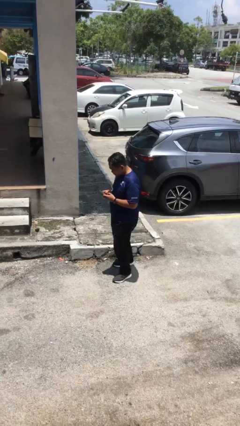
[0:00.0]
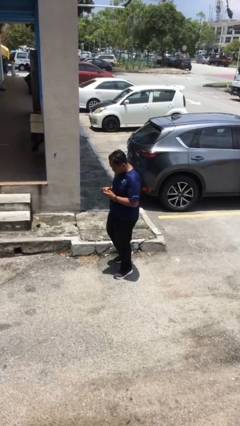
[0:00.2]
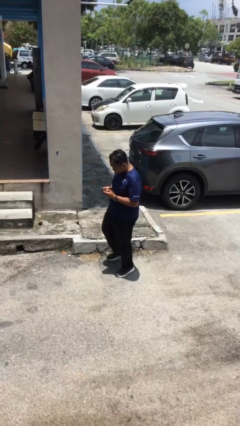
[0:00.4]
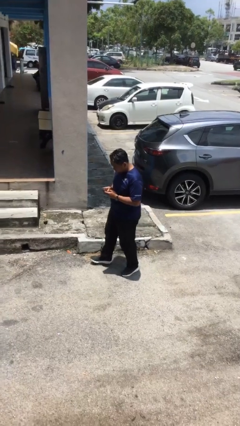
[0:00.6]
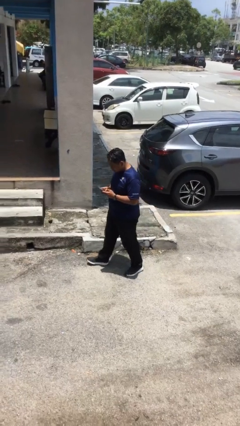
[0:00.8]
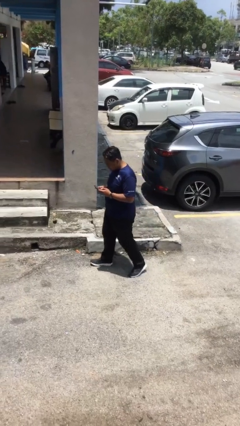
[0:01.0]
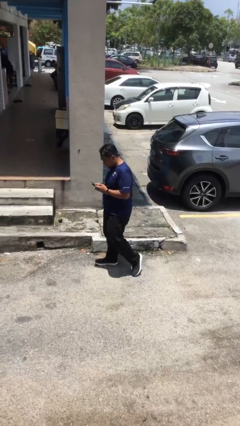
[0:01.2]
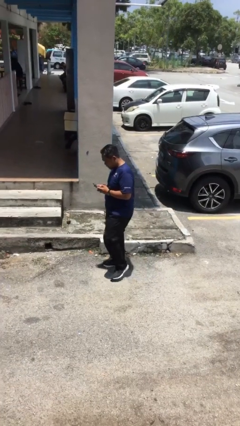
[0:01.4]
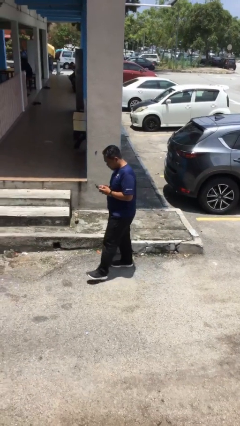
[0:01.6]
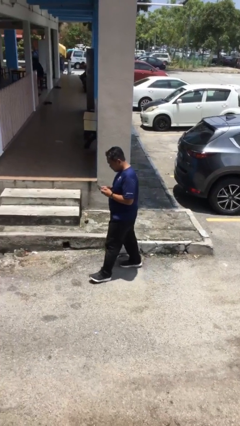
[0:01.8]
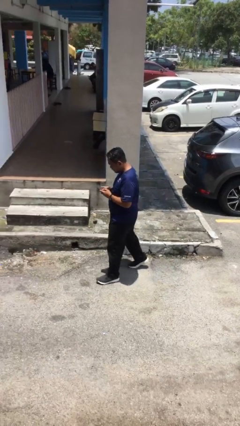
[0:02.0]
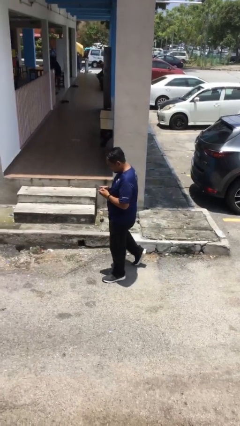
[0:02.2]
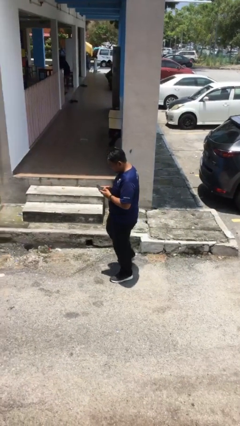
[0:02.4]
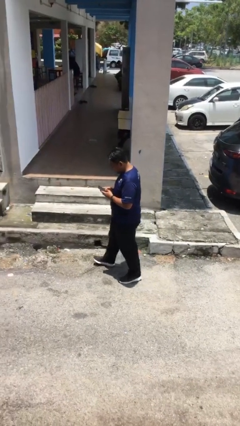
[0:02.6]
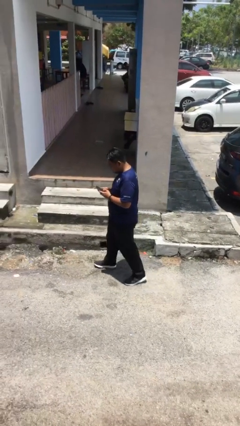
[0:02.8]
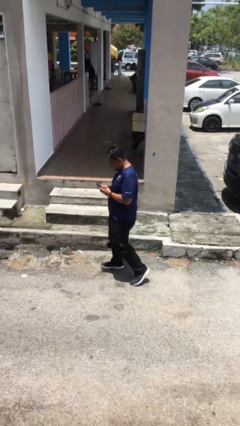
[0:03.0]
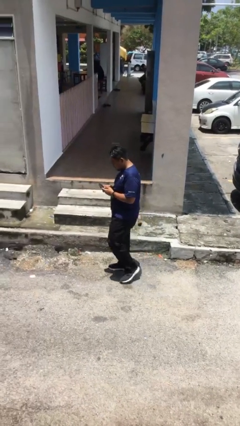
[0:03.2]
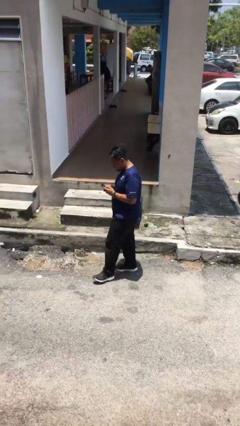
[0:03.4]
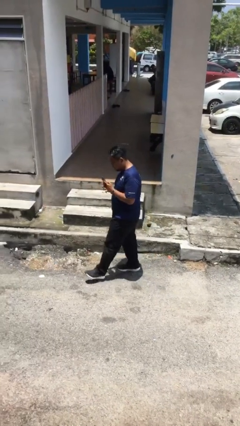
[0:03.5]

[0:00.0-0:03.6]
person texts on phone

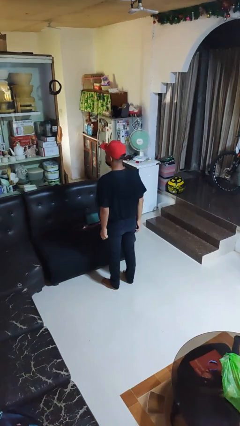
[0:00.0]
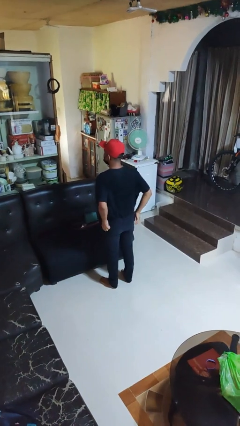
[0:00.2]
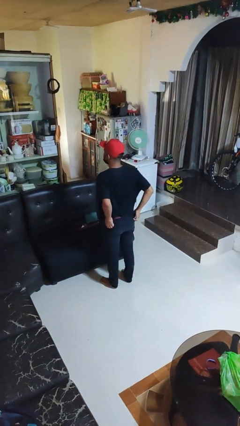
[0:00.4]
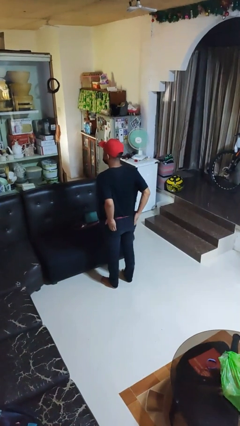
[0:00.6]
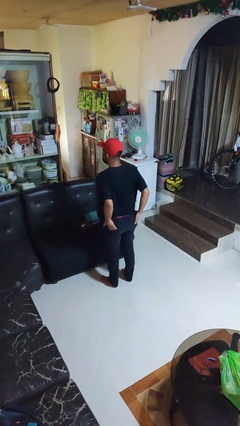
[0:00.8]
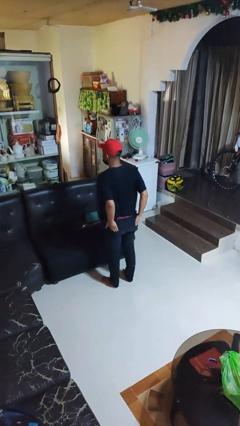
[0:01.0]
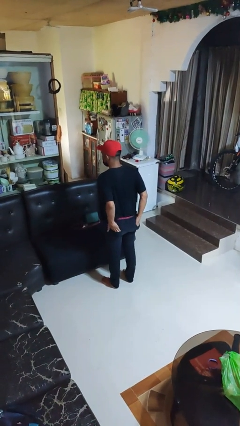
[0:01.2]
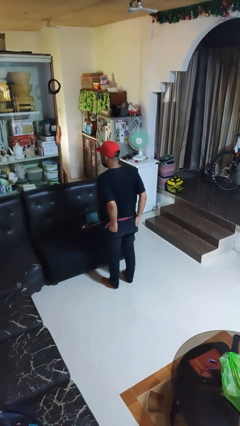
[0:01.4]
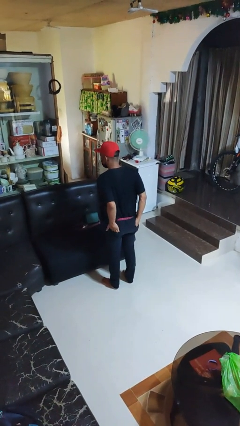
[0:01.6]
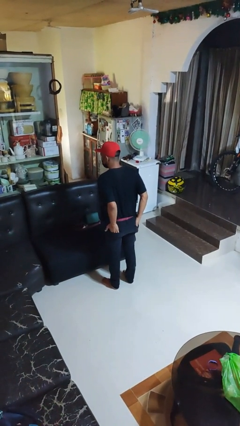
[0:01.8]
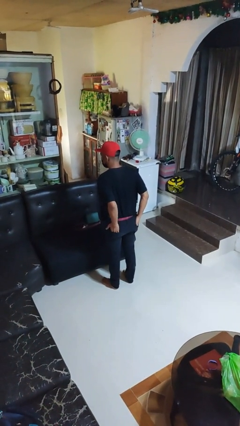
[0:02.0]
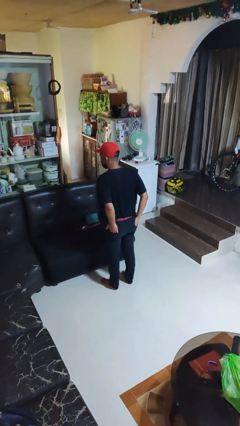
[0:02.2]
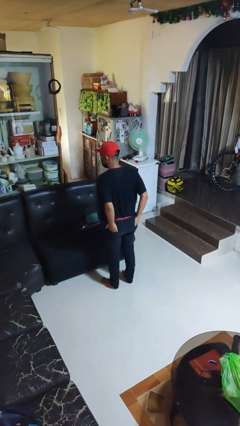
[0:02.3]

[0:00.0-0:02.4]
person puts hands in back pockets

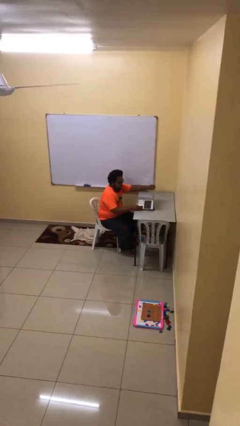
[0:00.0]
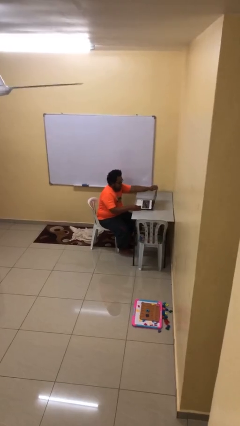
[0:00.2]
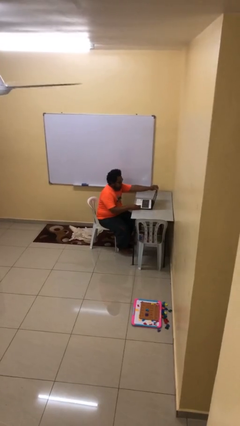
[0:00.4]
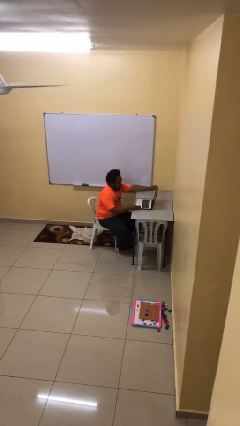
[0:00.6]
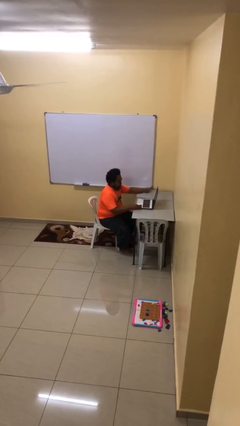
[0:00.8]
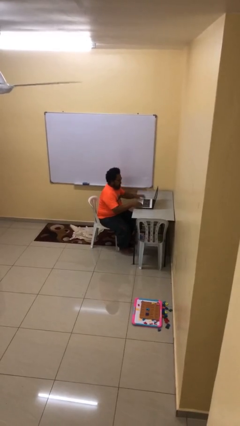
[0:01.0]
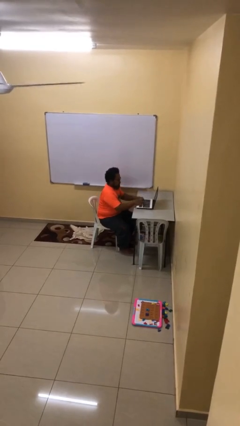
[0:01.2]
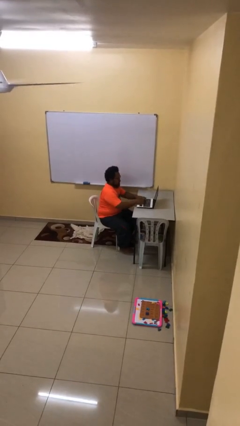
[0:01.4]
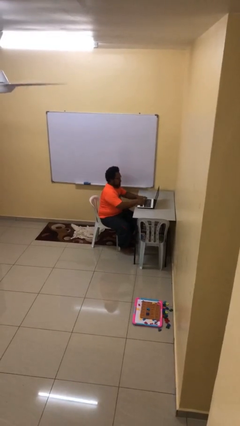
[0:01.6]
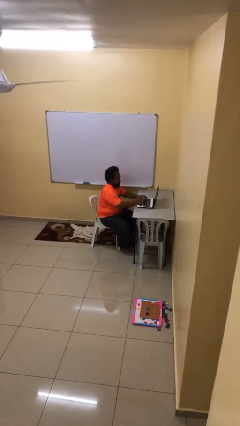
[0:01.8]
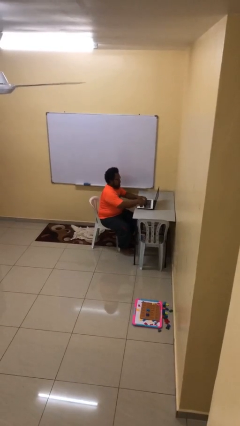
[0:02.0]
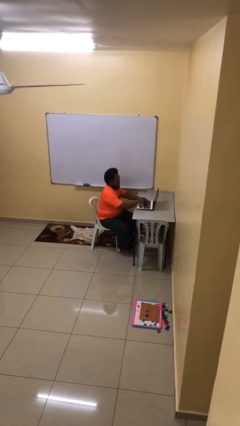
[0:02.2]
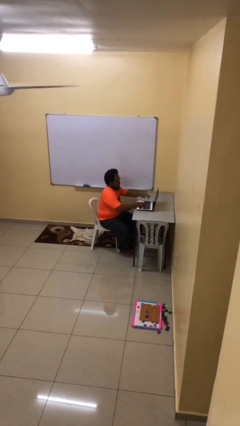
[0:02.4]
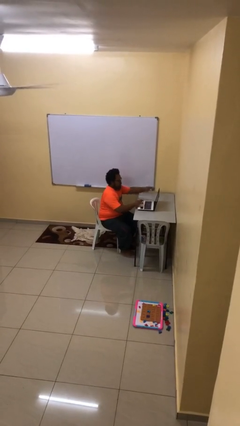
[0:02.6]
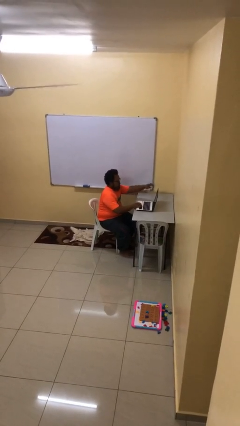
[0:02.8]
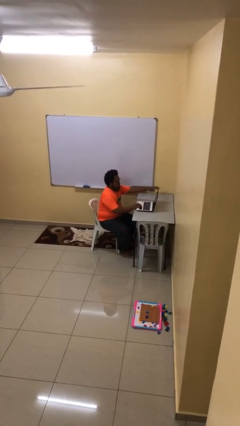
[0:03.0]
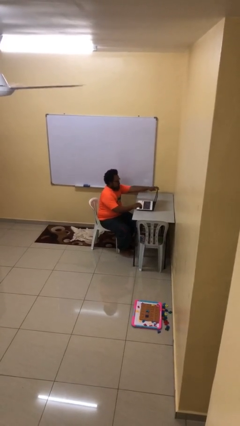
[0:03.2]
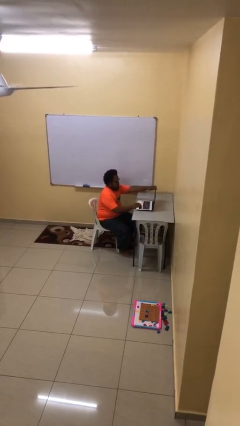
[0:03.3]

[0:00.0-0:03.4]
person interacts with laptop

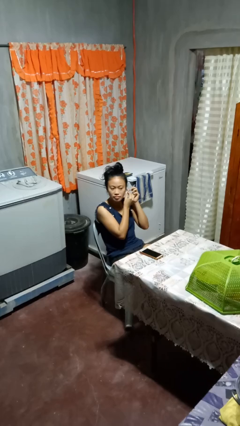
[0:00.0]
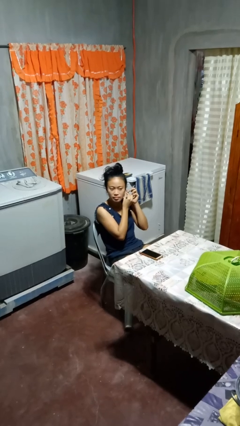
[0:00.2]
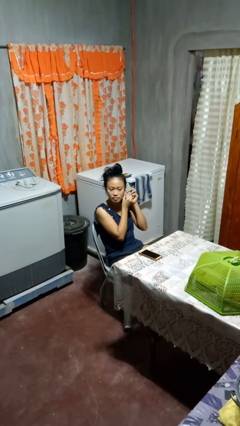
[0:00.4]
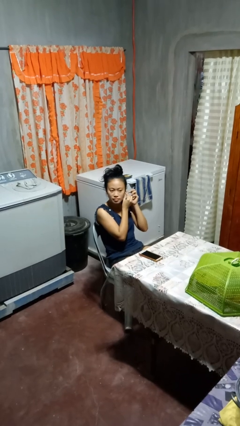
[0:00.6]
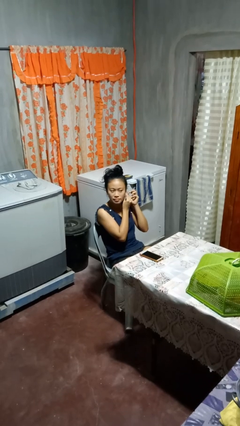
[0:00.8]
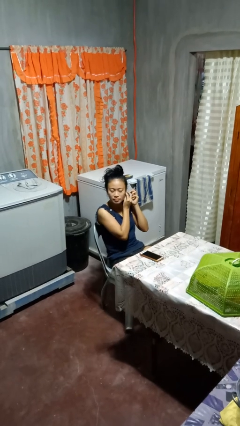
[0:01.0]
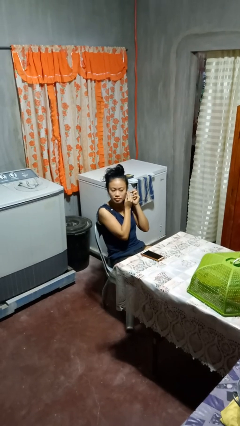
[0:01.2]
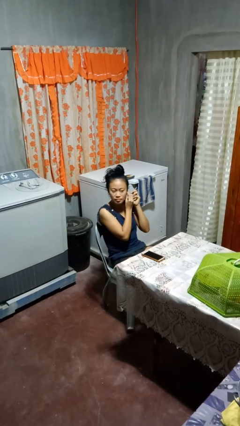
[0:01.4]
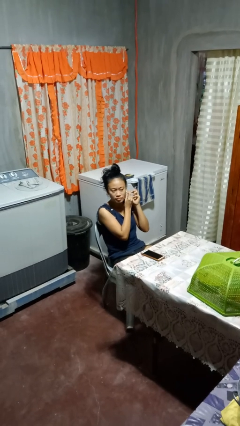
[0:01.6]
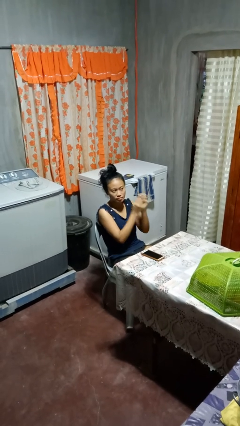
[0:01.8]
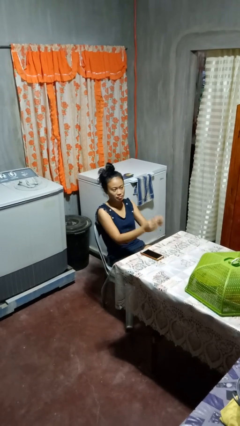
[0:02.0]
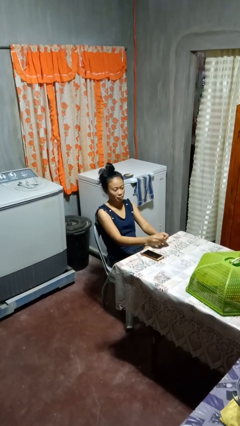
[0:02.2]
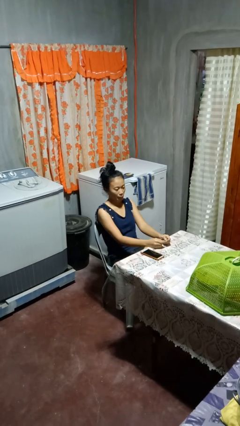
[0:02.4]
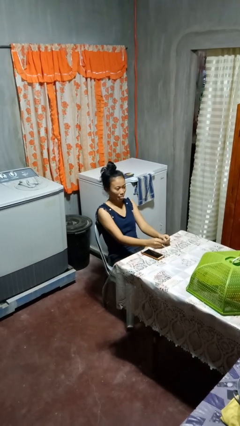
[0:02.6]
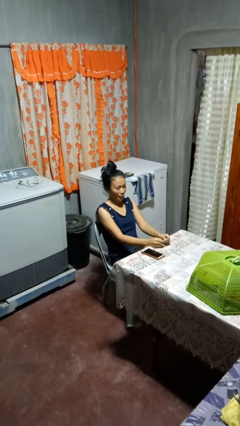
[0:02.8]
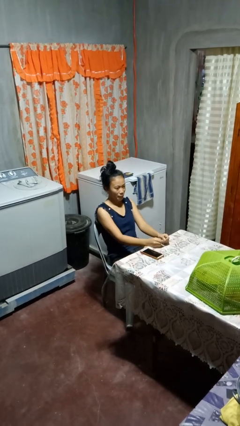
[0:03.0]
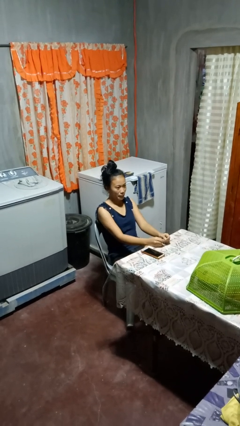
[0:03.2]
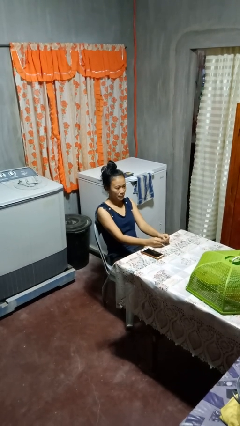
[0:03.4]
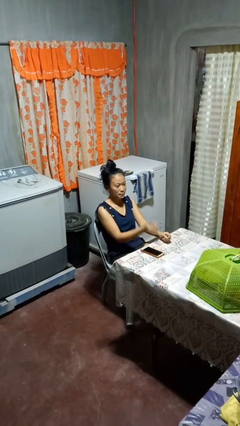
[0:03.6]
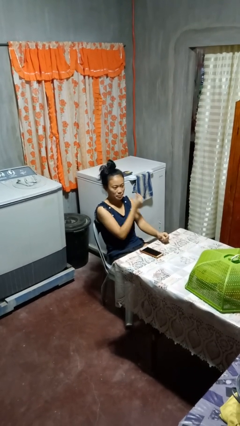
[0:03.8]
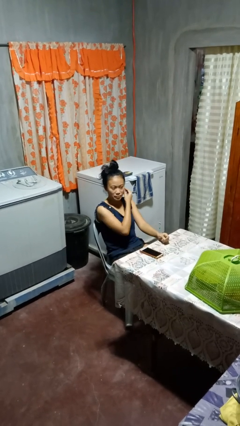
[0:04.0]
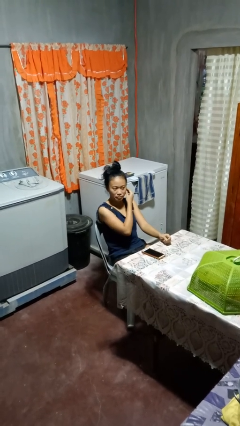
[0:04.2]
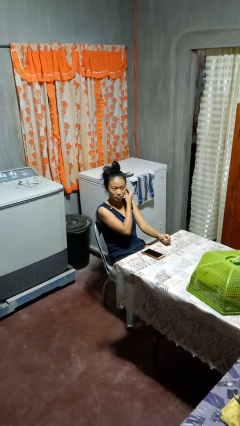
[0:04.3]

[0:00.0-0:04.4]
person puts on earrings

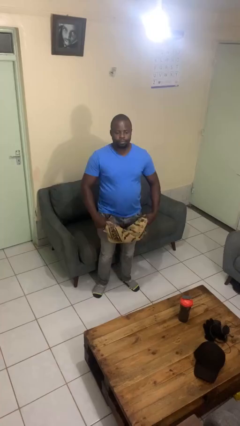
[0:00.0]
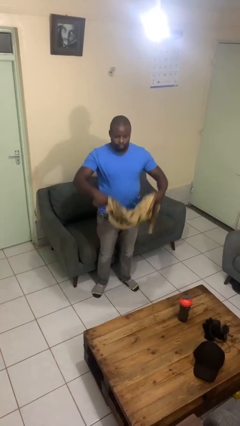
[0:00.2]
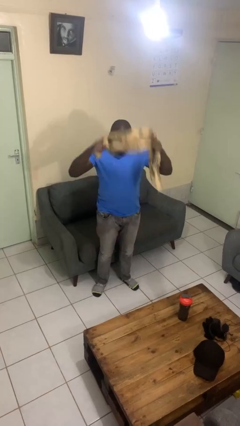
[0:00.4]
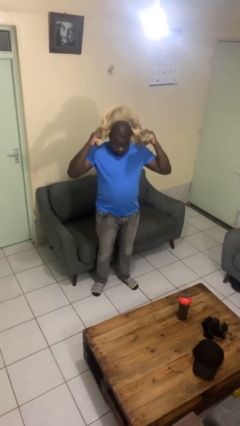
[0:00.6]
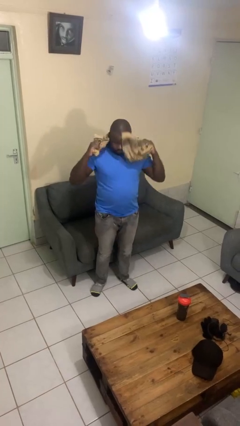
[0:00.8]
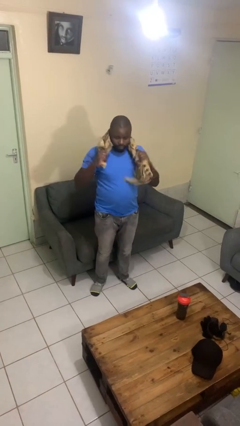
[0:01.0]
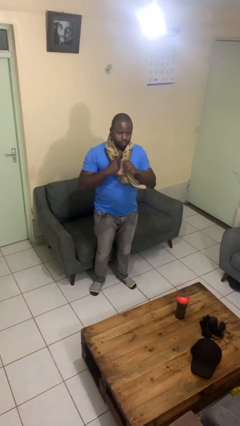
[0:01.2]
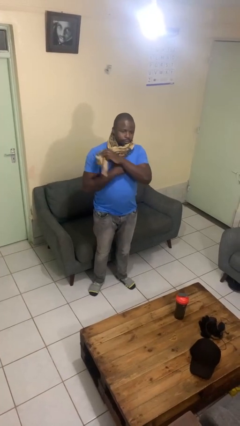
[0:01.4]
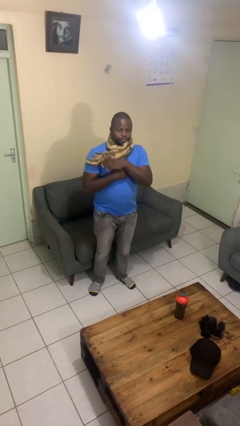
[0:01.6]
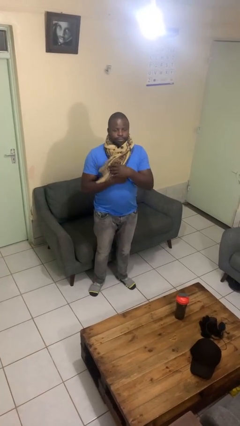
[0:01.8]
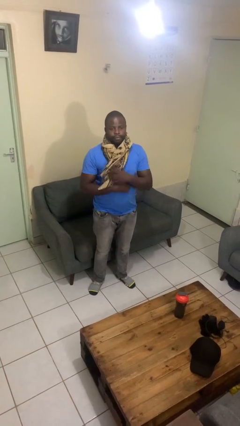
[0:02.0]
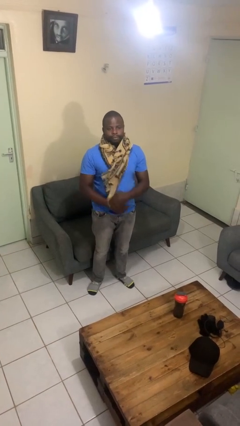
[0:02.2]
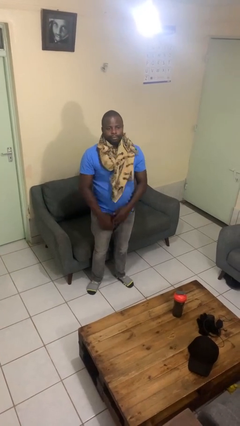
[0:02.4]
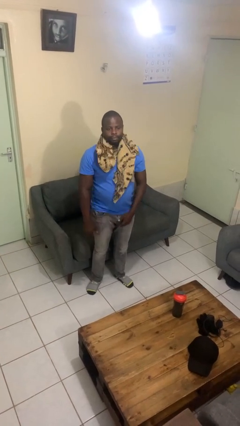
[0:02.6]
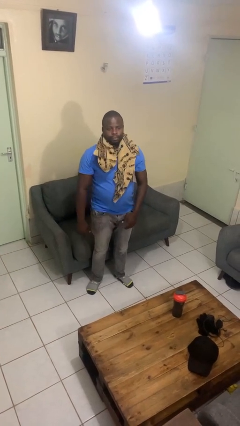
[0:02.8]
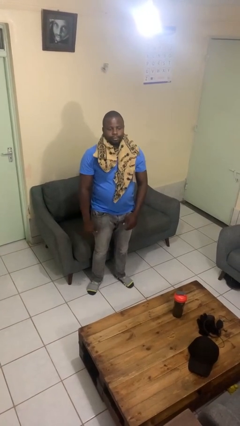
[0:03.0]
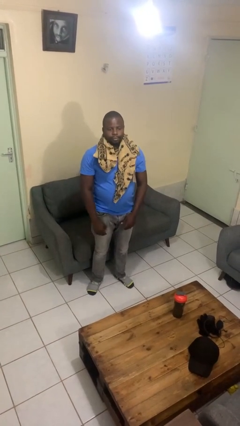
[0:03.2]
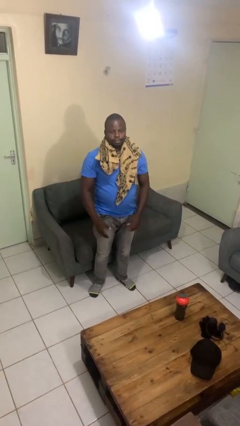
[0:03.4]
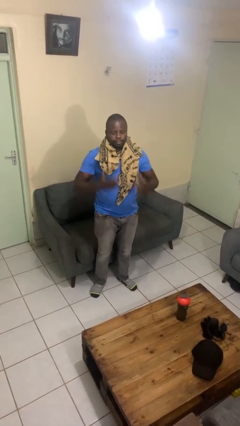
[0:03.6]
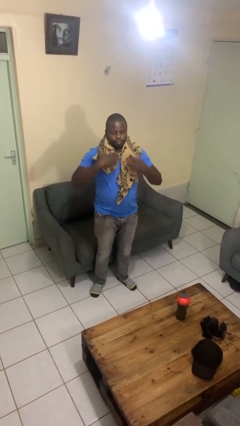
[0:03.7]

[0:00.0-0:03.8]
person puts on scarf
